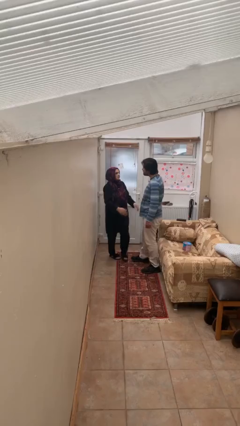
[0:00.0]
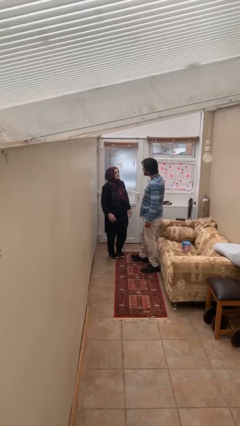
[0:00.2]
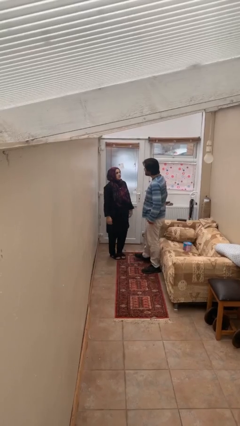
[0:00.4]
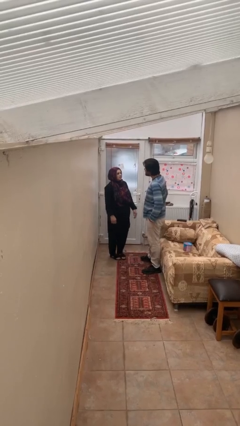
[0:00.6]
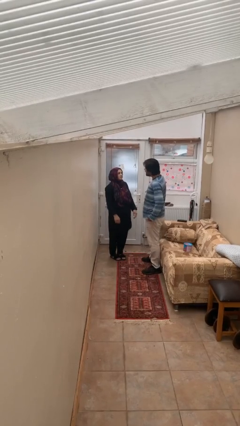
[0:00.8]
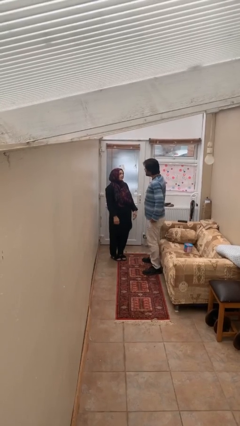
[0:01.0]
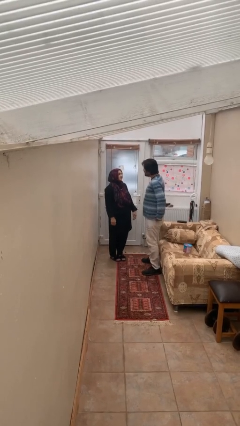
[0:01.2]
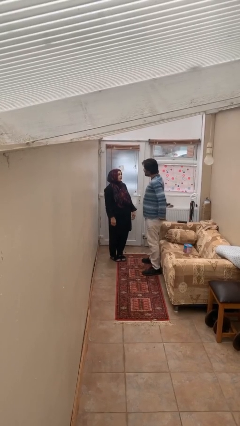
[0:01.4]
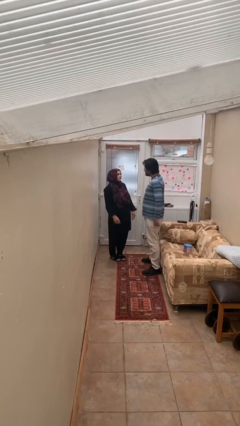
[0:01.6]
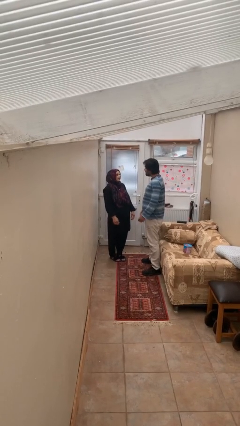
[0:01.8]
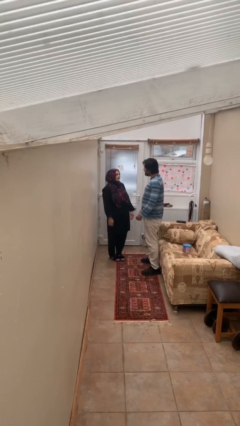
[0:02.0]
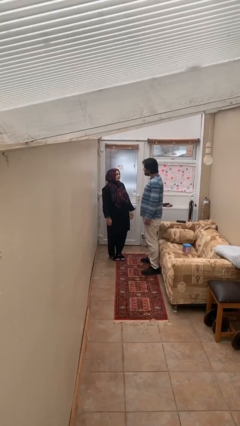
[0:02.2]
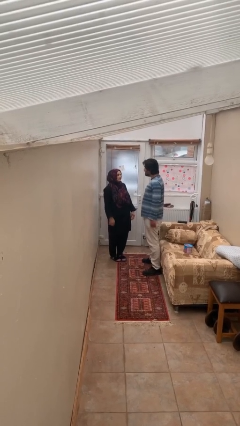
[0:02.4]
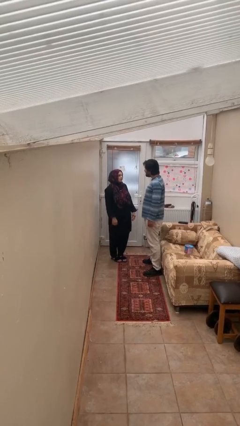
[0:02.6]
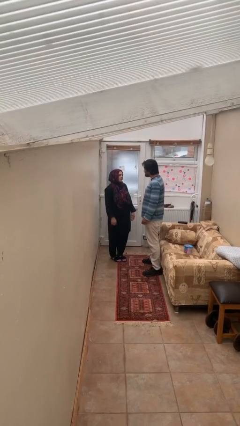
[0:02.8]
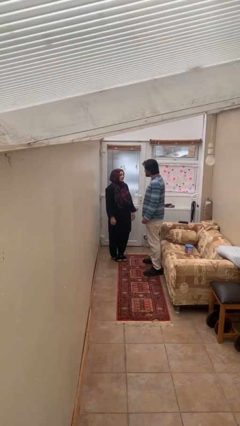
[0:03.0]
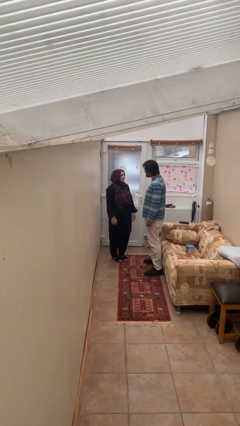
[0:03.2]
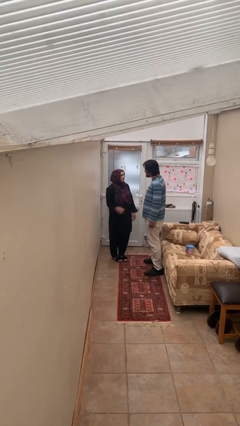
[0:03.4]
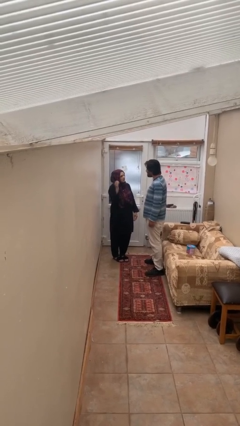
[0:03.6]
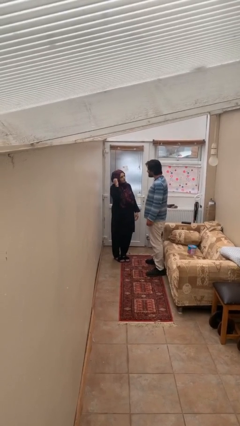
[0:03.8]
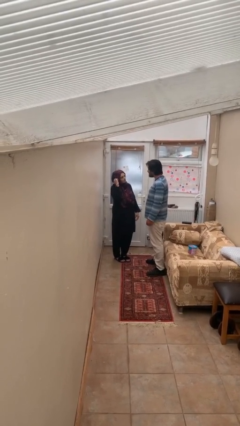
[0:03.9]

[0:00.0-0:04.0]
person talks to person

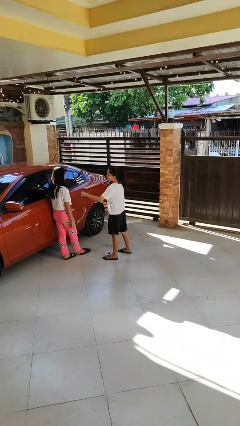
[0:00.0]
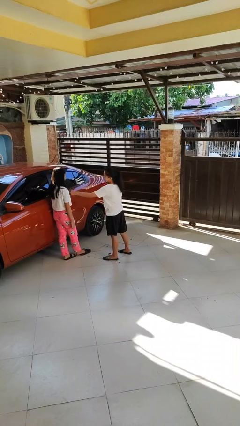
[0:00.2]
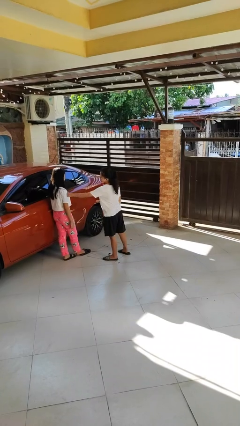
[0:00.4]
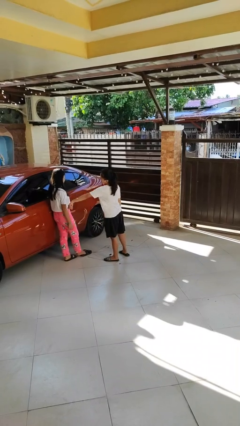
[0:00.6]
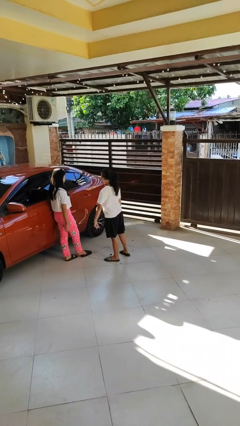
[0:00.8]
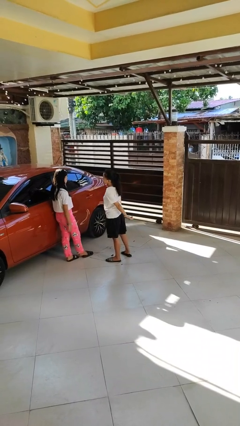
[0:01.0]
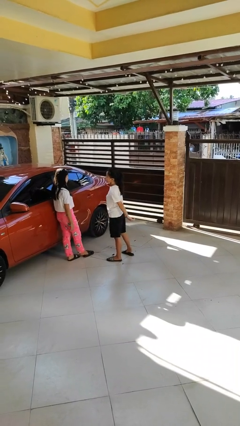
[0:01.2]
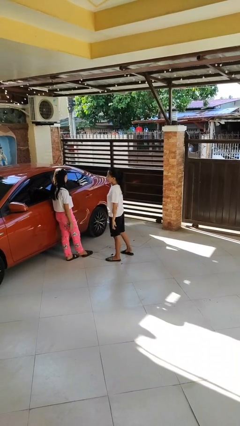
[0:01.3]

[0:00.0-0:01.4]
person pounds shoulders of person

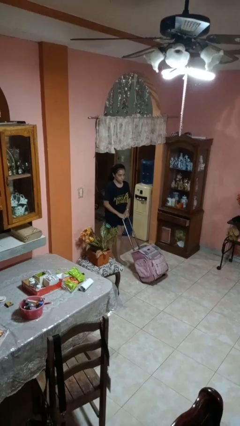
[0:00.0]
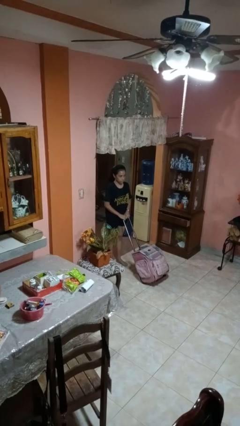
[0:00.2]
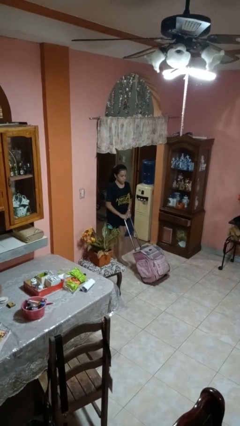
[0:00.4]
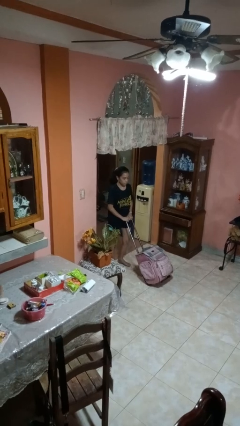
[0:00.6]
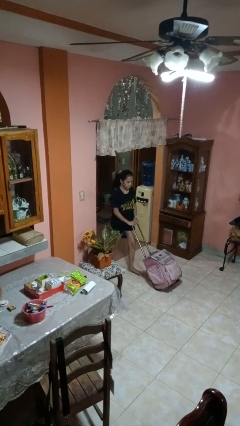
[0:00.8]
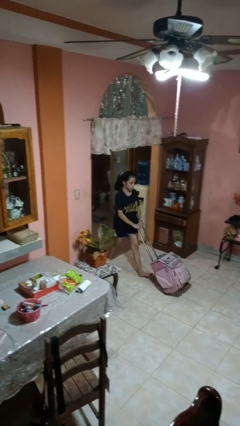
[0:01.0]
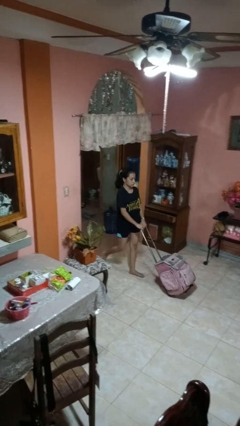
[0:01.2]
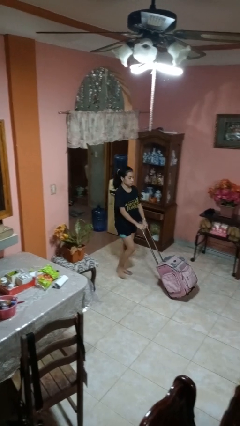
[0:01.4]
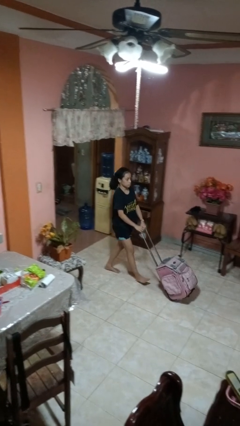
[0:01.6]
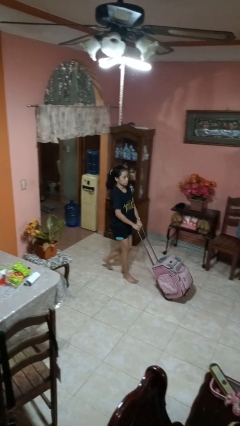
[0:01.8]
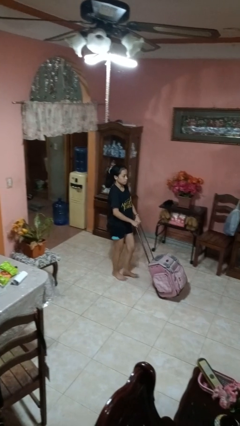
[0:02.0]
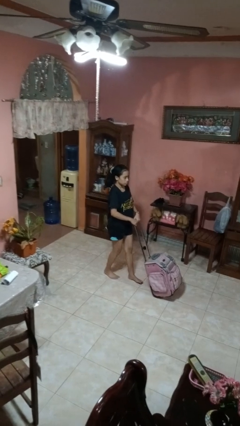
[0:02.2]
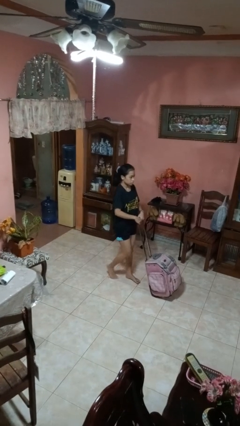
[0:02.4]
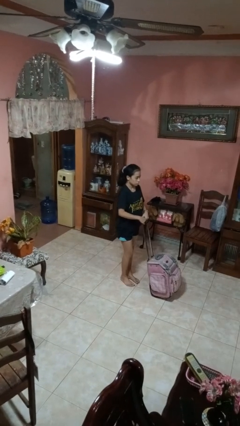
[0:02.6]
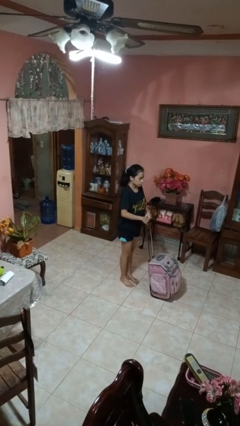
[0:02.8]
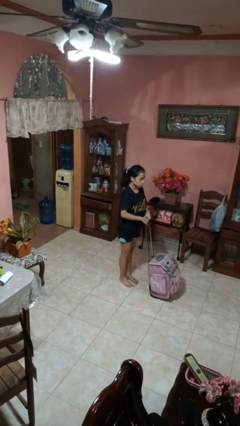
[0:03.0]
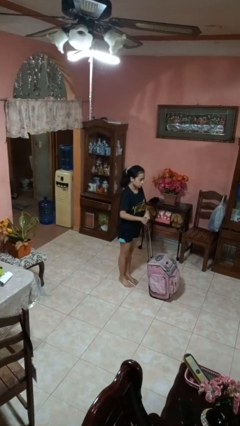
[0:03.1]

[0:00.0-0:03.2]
person pushes wheeled cart

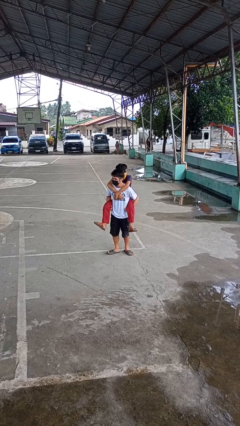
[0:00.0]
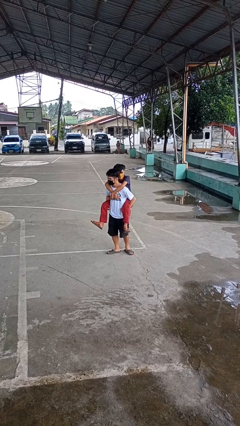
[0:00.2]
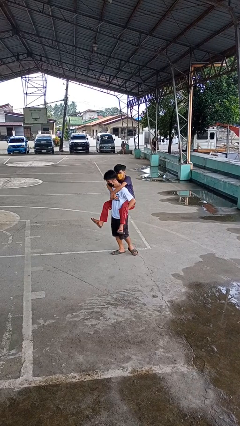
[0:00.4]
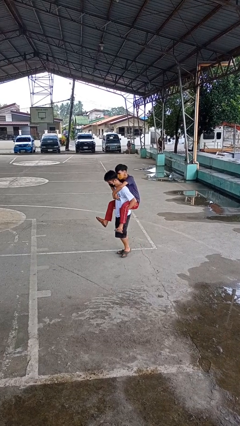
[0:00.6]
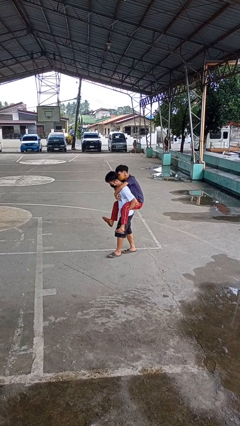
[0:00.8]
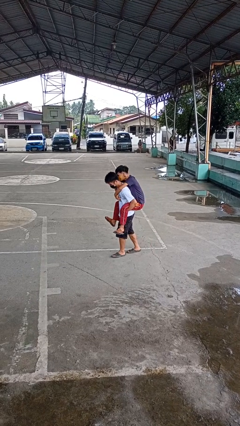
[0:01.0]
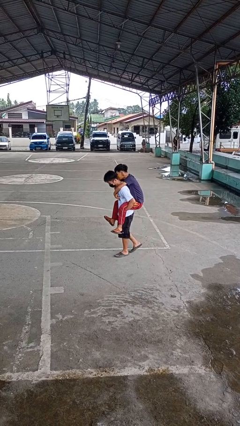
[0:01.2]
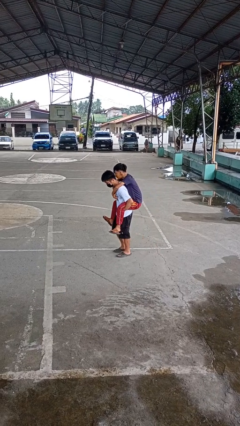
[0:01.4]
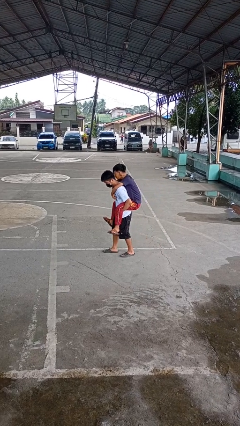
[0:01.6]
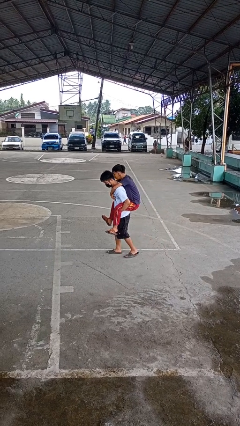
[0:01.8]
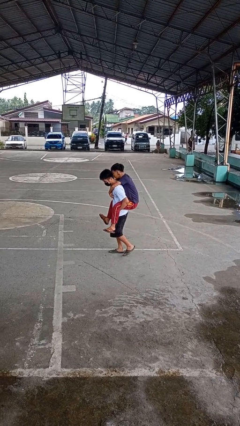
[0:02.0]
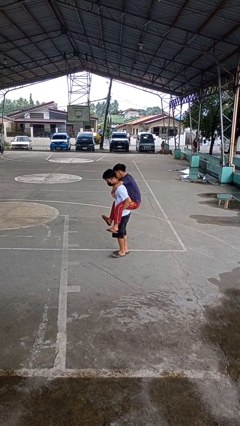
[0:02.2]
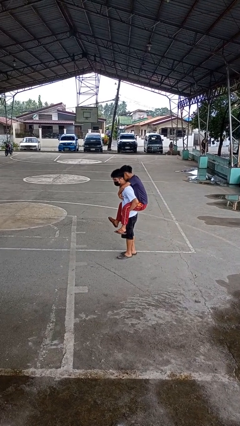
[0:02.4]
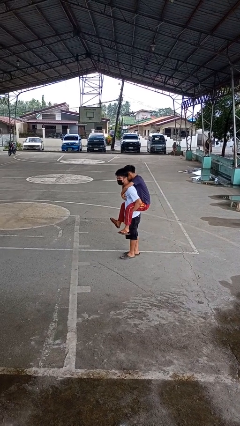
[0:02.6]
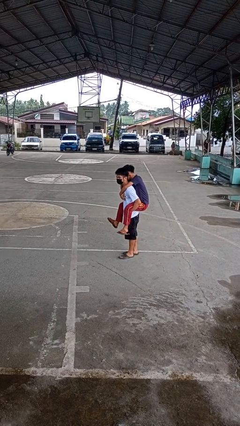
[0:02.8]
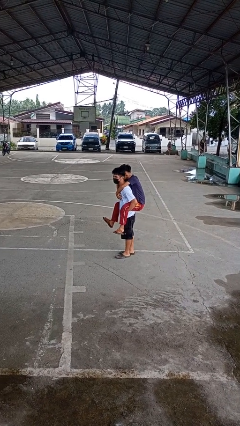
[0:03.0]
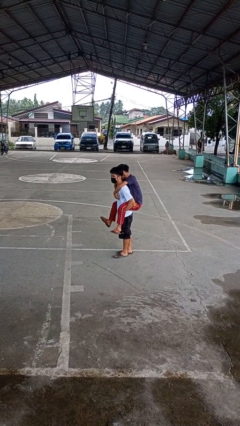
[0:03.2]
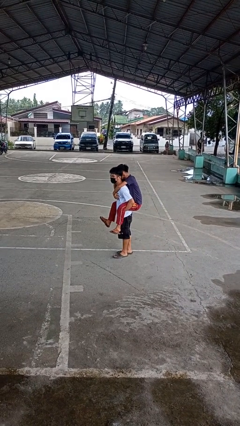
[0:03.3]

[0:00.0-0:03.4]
person carries person on back

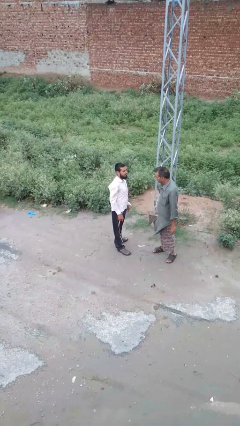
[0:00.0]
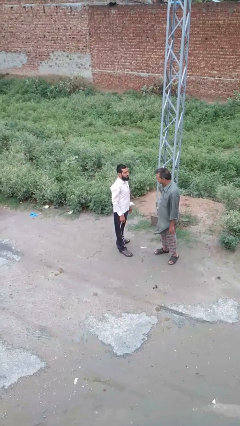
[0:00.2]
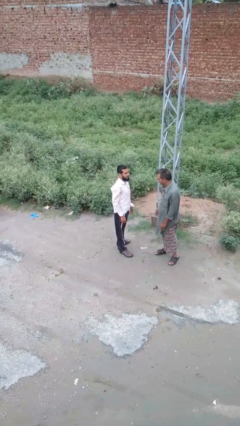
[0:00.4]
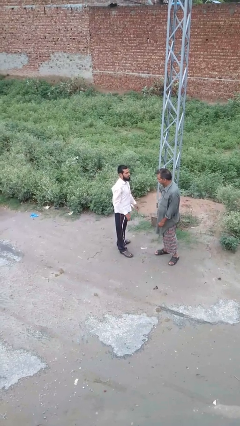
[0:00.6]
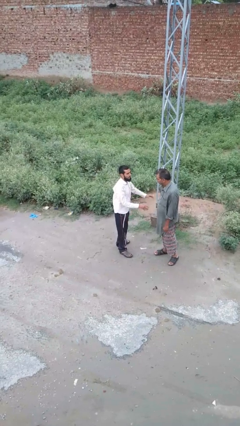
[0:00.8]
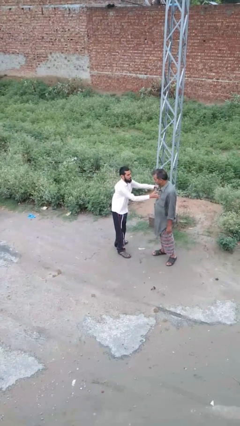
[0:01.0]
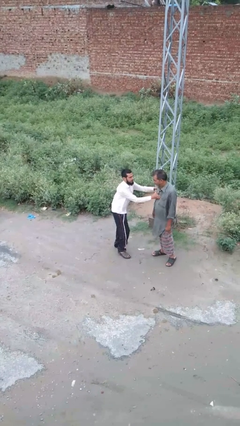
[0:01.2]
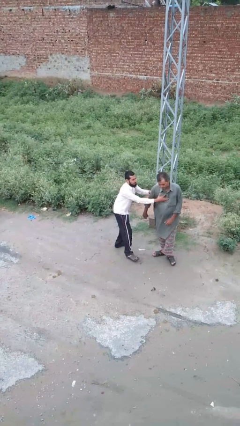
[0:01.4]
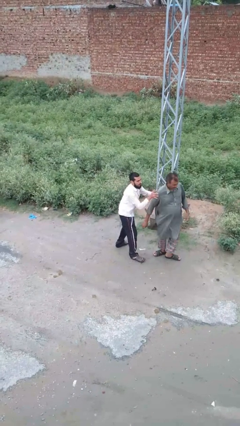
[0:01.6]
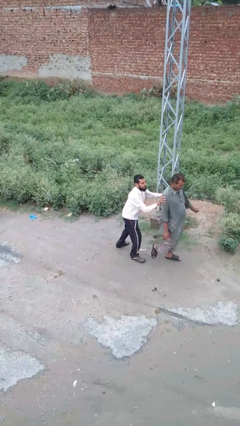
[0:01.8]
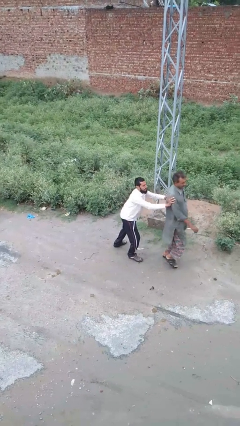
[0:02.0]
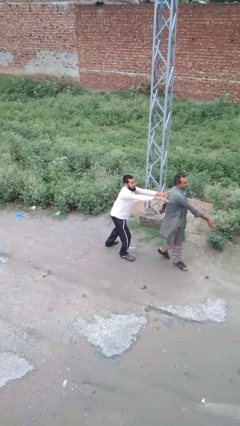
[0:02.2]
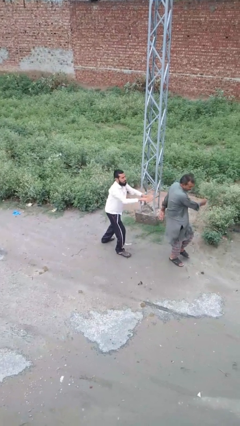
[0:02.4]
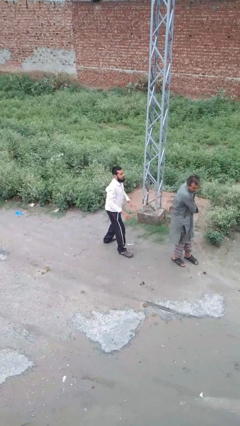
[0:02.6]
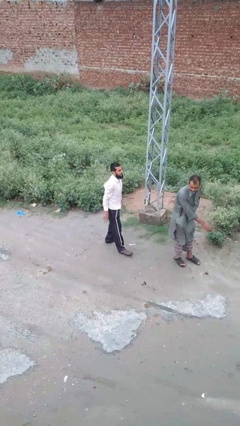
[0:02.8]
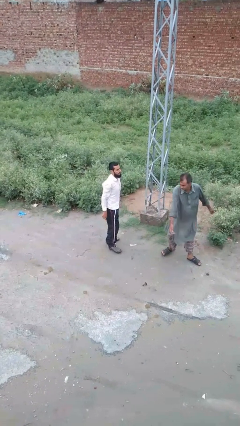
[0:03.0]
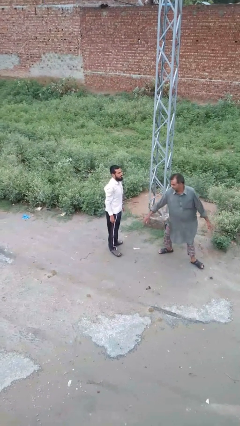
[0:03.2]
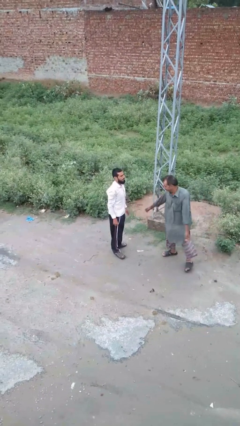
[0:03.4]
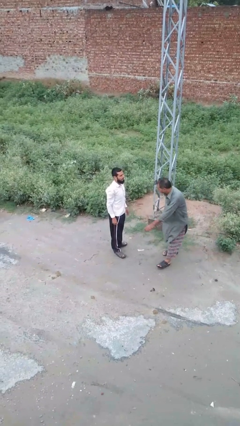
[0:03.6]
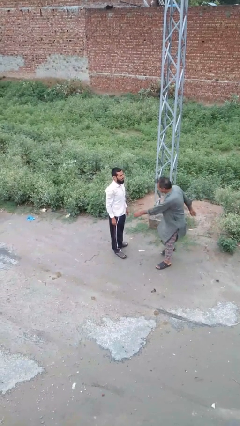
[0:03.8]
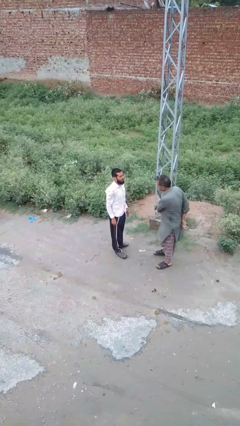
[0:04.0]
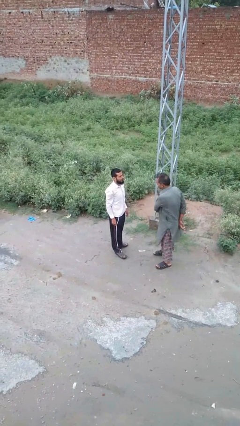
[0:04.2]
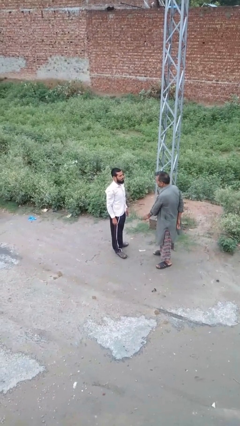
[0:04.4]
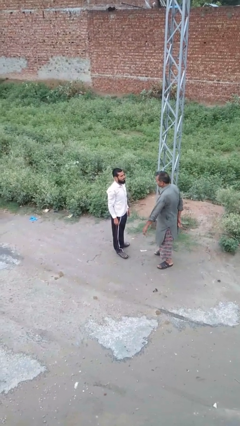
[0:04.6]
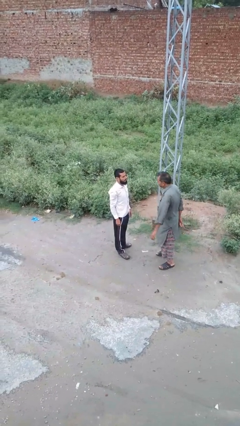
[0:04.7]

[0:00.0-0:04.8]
person shoves person

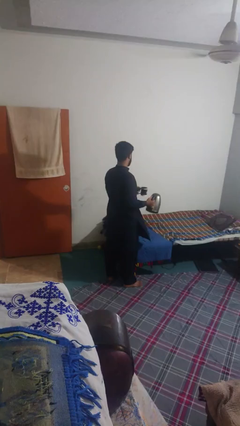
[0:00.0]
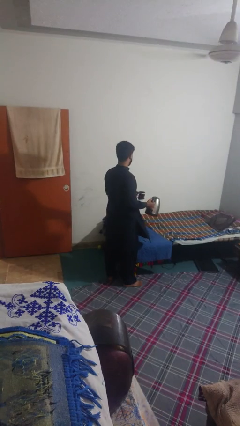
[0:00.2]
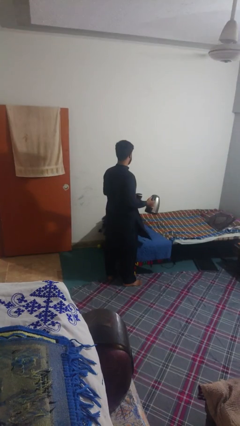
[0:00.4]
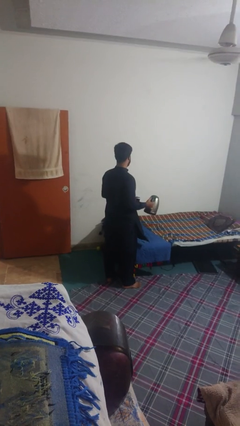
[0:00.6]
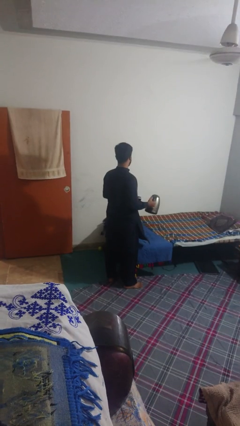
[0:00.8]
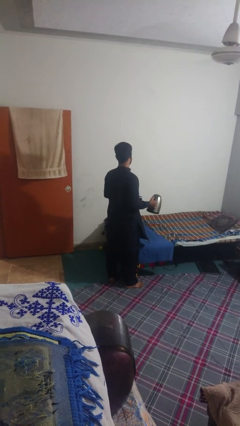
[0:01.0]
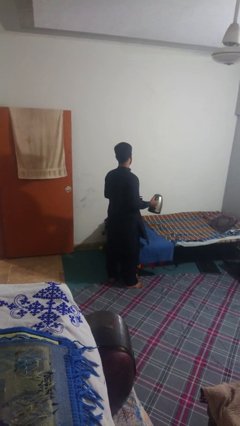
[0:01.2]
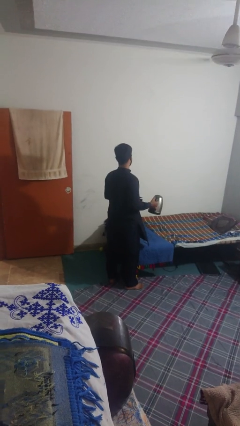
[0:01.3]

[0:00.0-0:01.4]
person pours coffee into mug
